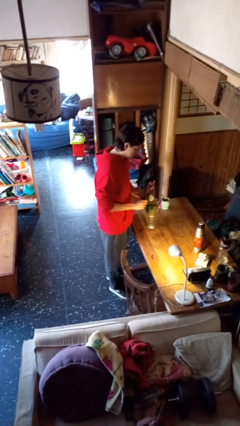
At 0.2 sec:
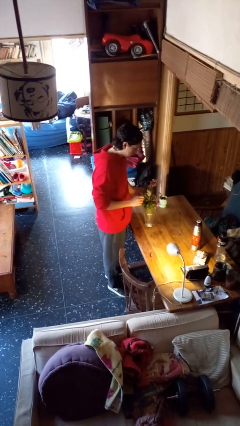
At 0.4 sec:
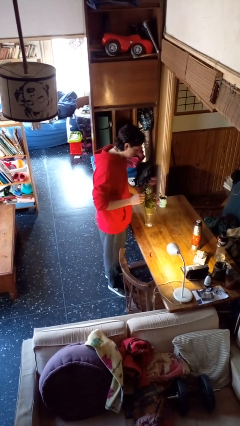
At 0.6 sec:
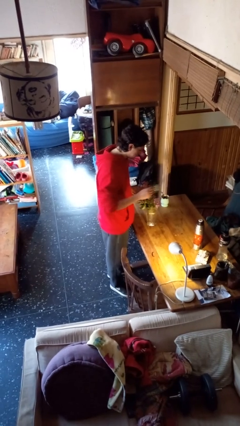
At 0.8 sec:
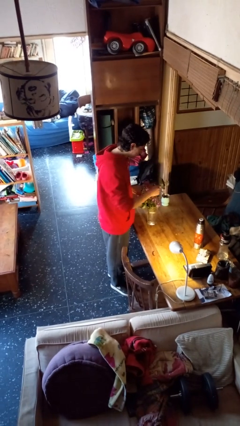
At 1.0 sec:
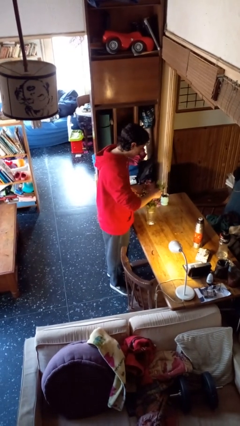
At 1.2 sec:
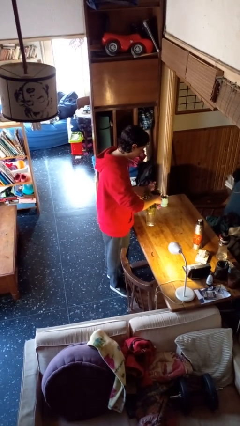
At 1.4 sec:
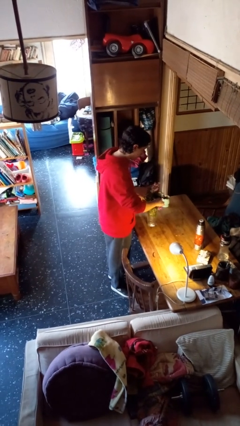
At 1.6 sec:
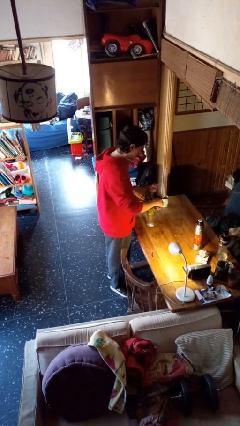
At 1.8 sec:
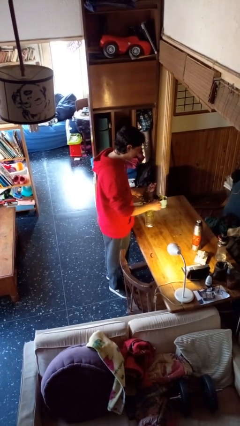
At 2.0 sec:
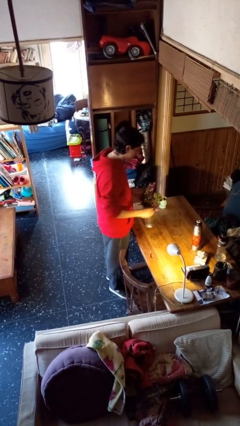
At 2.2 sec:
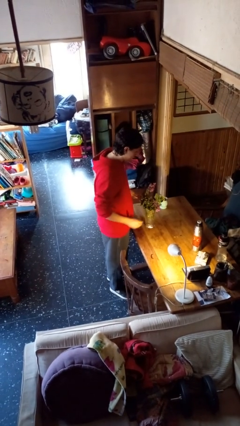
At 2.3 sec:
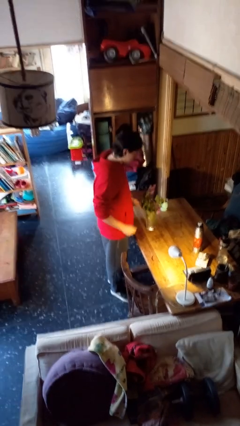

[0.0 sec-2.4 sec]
person arranges flowers in vase

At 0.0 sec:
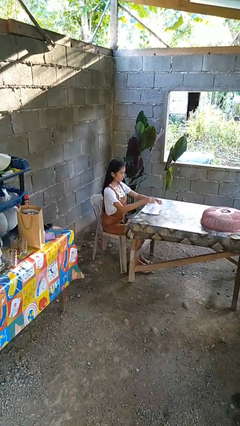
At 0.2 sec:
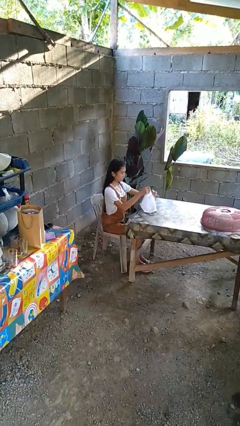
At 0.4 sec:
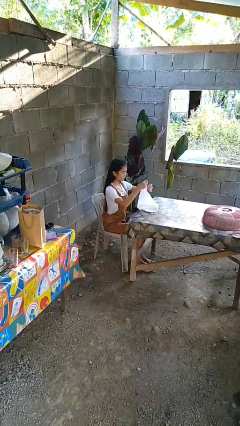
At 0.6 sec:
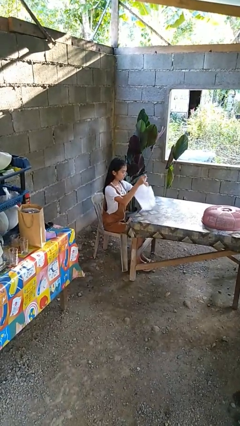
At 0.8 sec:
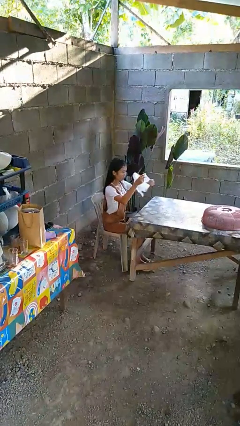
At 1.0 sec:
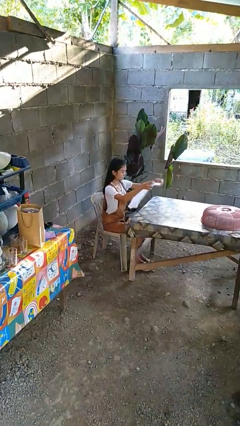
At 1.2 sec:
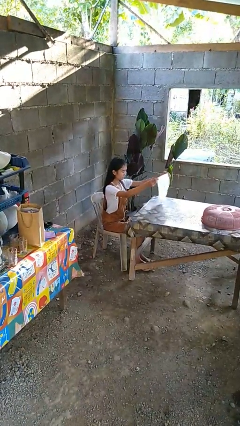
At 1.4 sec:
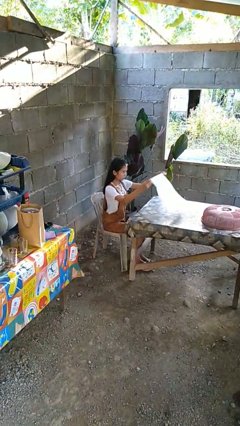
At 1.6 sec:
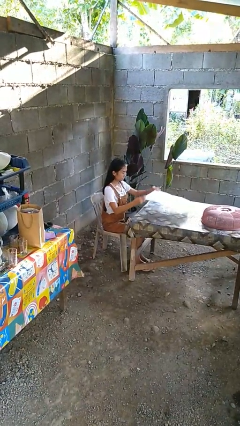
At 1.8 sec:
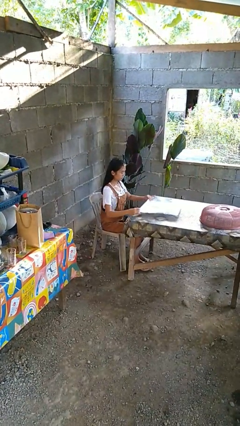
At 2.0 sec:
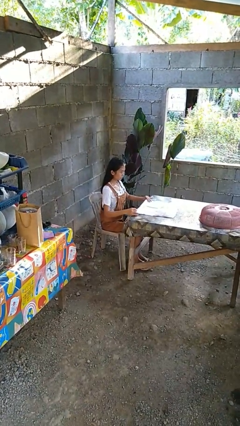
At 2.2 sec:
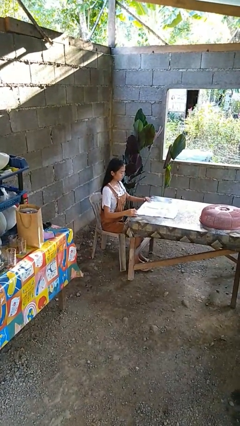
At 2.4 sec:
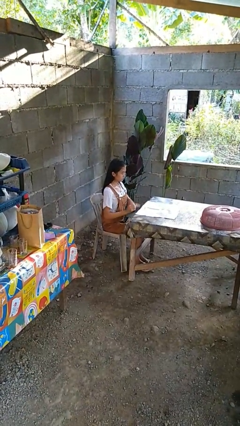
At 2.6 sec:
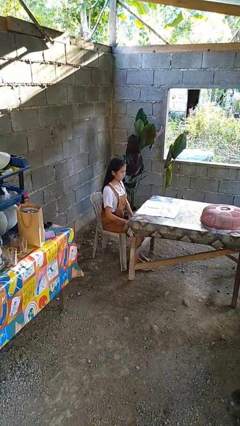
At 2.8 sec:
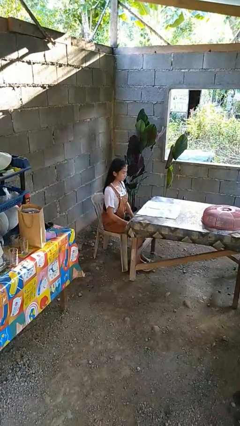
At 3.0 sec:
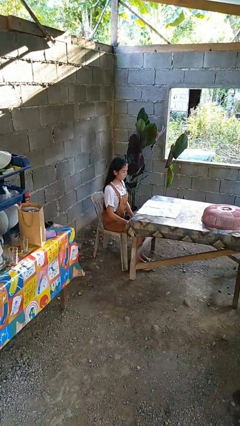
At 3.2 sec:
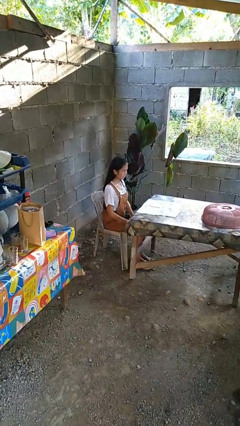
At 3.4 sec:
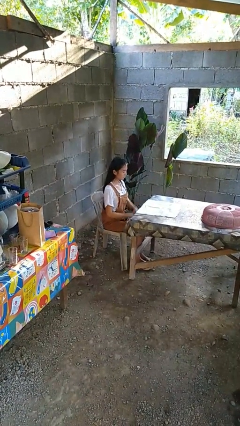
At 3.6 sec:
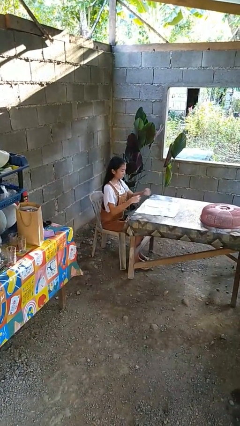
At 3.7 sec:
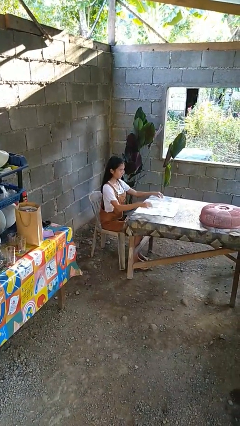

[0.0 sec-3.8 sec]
person spreads tablecloth

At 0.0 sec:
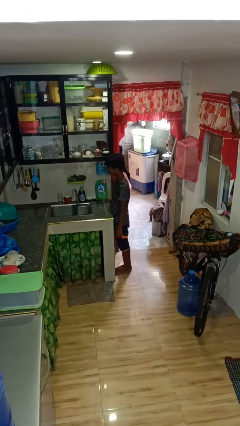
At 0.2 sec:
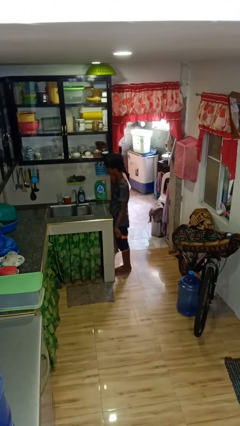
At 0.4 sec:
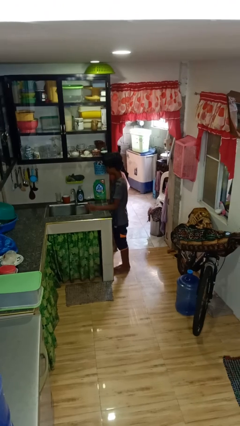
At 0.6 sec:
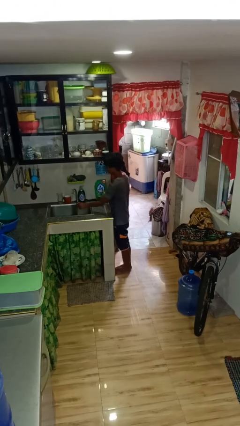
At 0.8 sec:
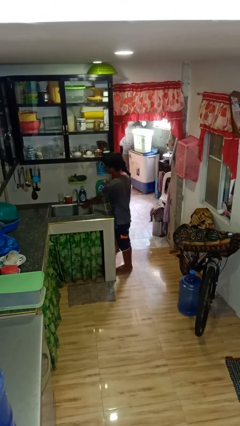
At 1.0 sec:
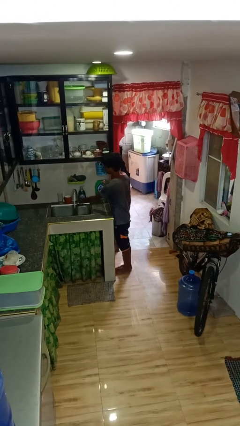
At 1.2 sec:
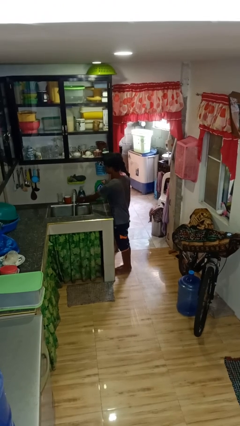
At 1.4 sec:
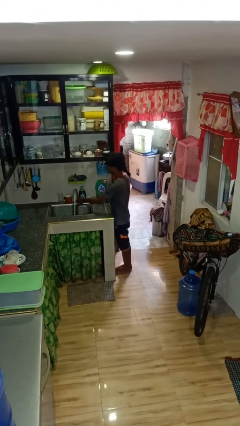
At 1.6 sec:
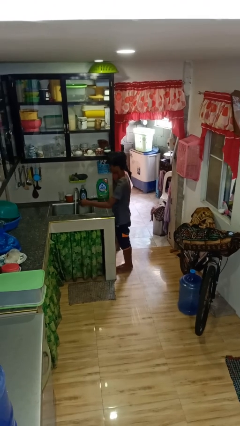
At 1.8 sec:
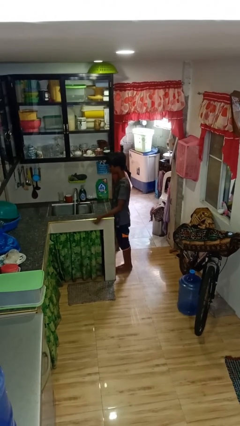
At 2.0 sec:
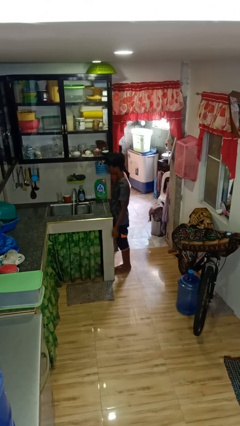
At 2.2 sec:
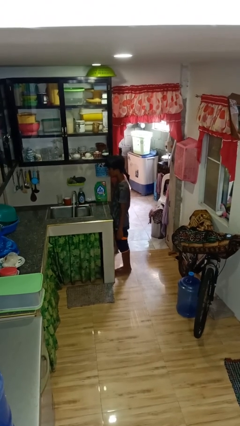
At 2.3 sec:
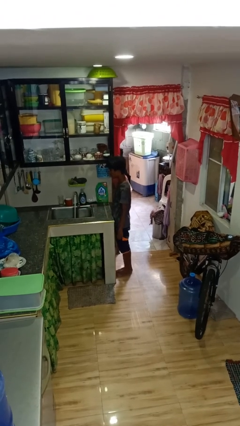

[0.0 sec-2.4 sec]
person turns on faucet

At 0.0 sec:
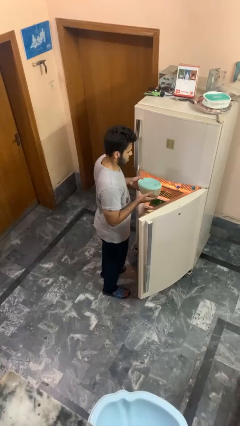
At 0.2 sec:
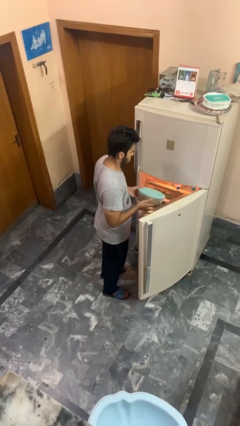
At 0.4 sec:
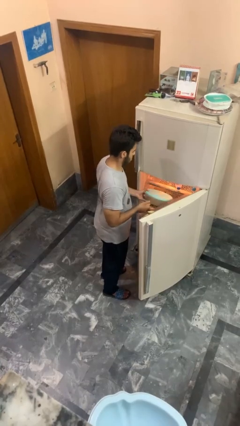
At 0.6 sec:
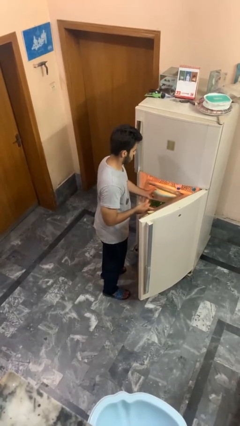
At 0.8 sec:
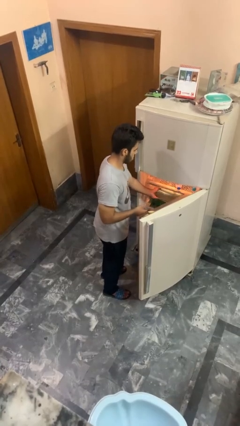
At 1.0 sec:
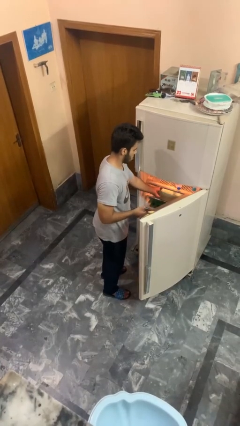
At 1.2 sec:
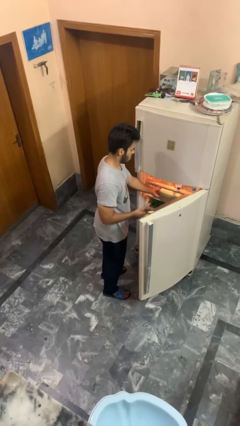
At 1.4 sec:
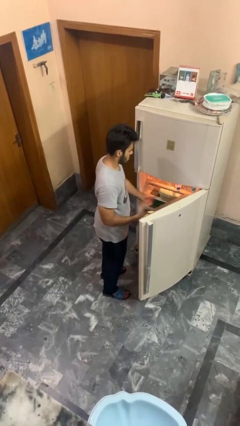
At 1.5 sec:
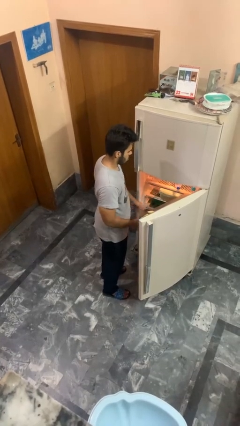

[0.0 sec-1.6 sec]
person puts down object into cabinet

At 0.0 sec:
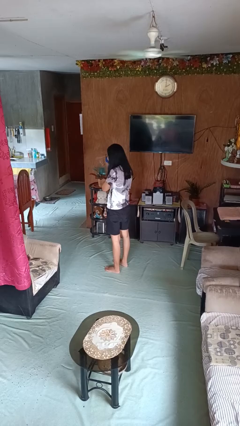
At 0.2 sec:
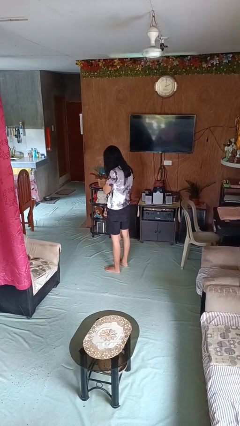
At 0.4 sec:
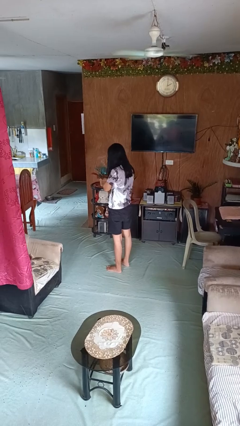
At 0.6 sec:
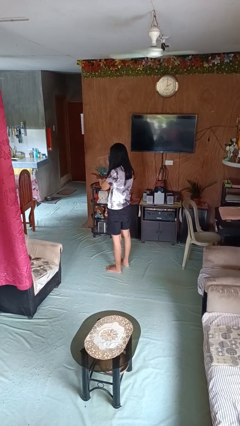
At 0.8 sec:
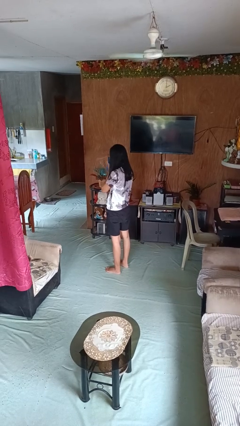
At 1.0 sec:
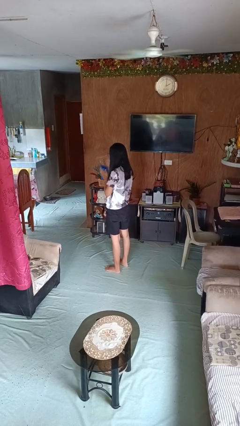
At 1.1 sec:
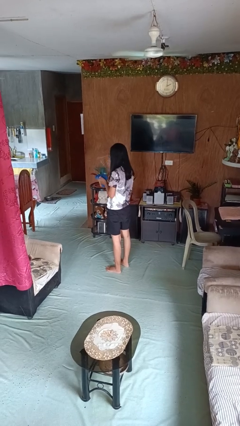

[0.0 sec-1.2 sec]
person blows nose

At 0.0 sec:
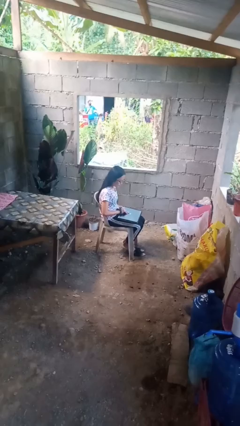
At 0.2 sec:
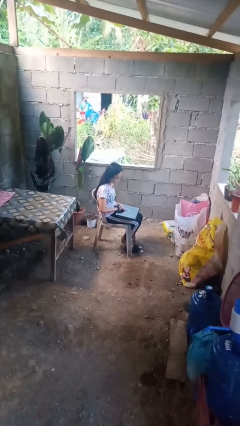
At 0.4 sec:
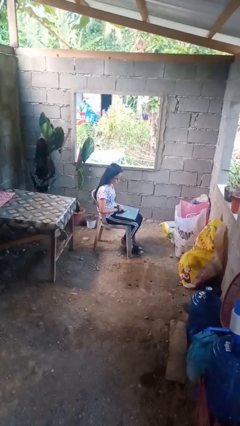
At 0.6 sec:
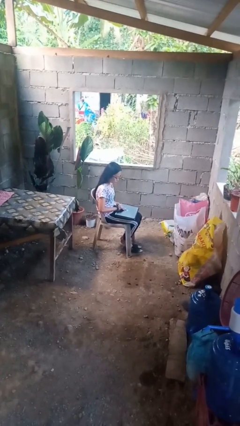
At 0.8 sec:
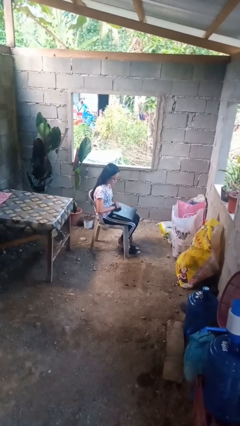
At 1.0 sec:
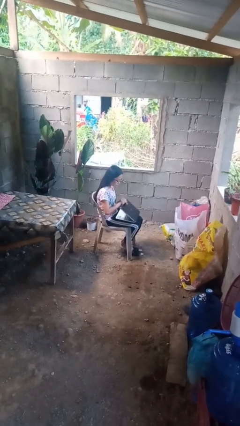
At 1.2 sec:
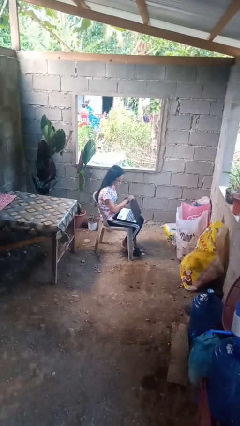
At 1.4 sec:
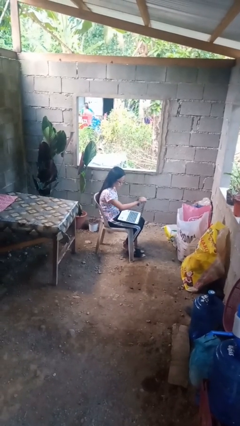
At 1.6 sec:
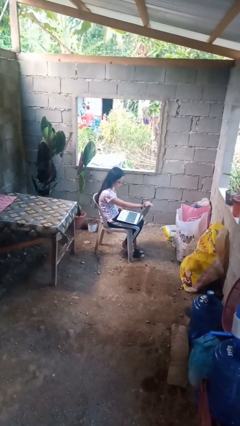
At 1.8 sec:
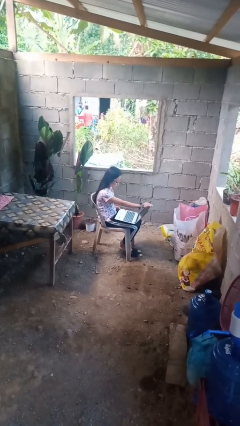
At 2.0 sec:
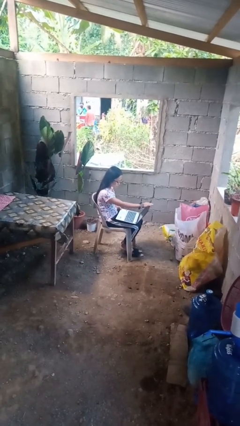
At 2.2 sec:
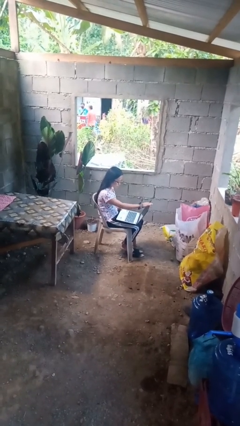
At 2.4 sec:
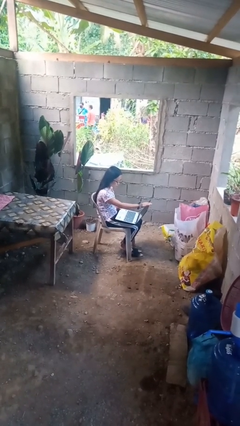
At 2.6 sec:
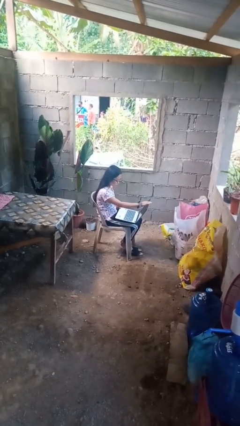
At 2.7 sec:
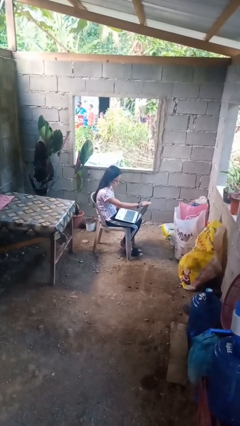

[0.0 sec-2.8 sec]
person opens laptop

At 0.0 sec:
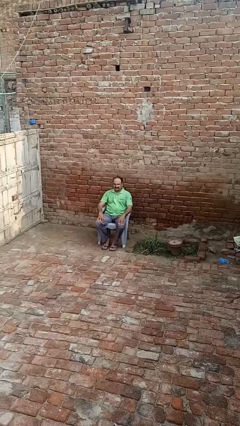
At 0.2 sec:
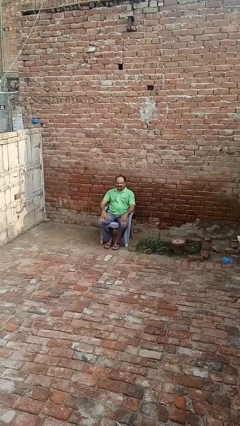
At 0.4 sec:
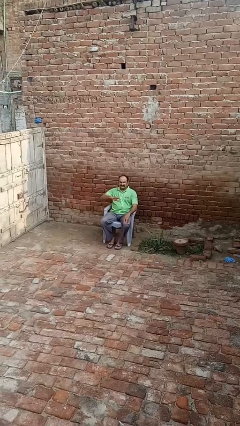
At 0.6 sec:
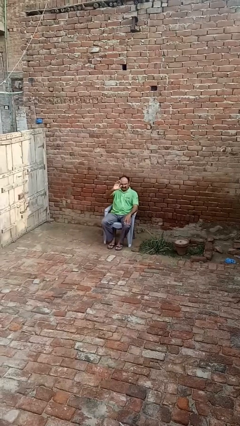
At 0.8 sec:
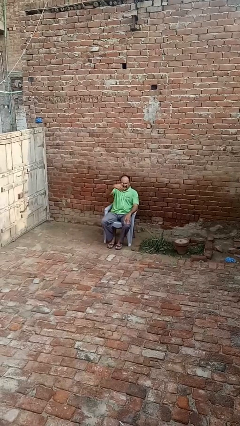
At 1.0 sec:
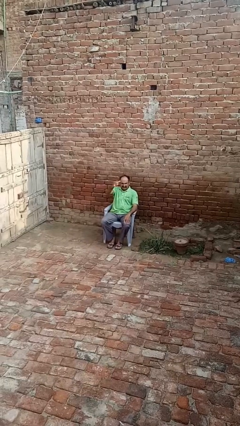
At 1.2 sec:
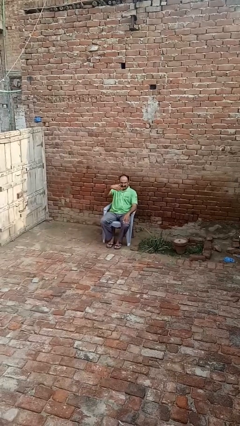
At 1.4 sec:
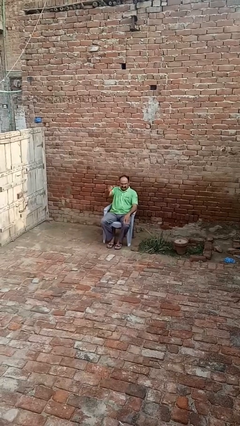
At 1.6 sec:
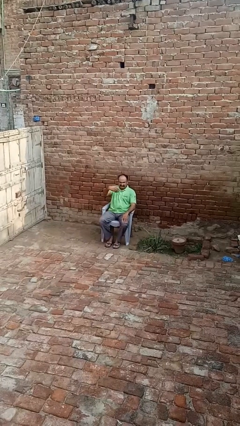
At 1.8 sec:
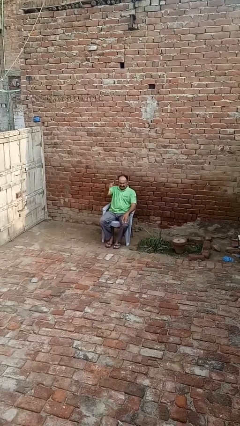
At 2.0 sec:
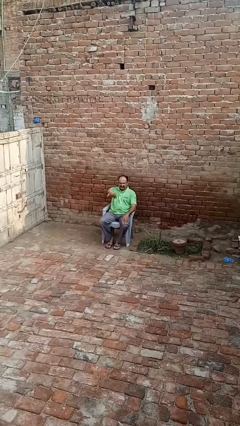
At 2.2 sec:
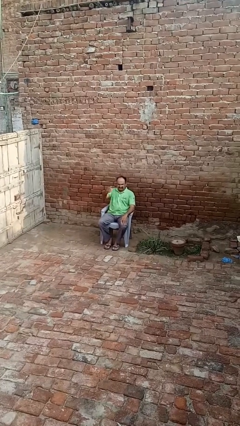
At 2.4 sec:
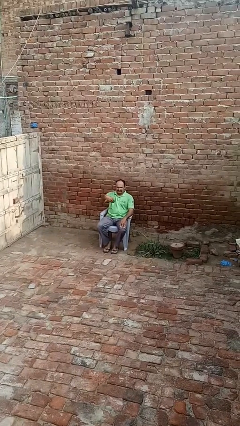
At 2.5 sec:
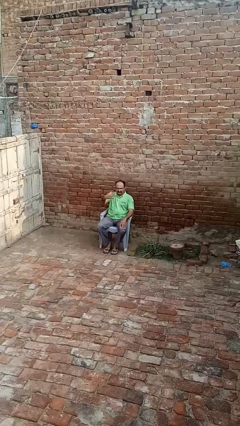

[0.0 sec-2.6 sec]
person gestures come here
